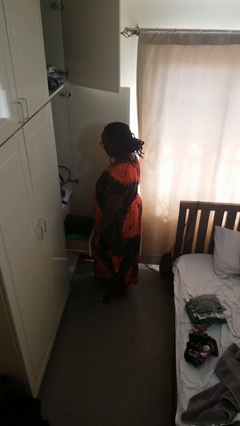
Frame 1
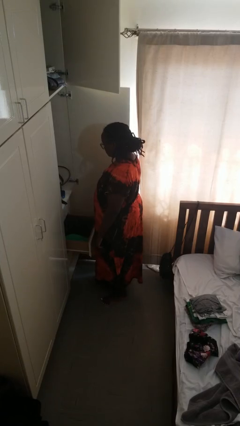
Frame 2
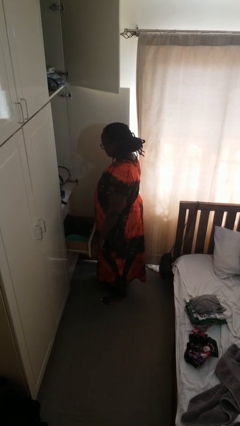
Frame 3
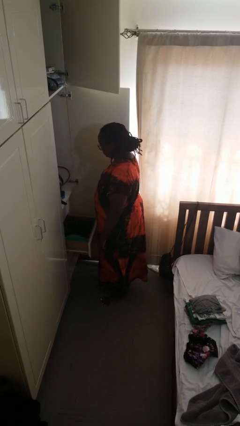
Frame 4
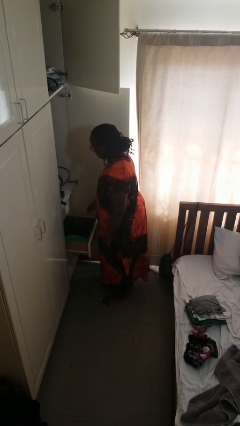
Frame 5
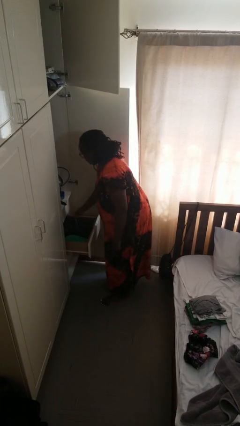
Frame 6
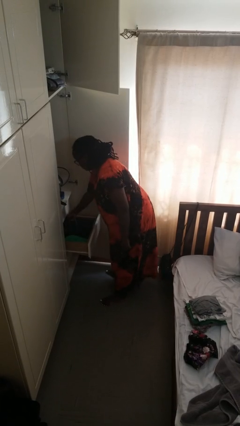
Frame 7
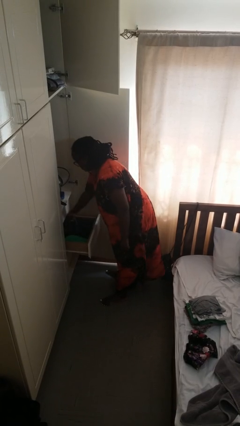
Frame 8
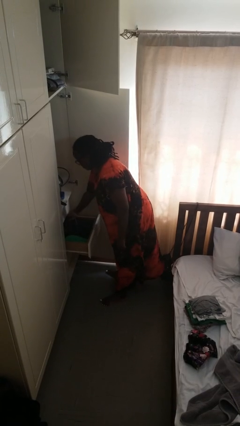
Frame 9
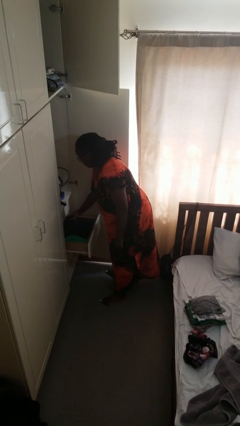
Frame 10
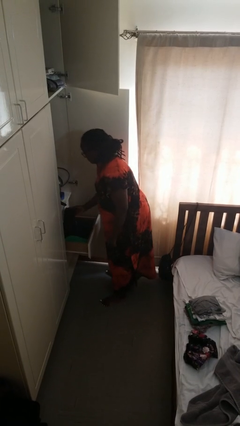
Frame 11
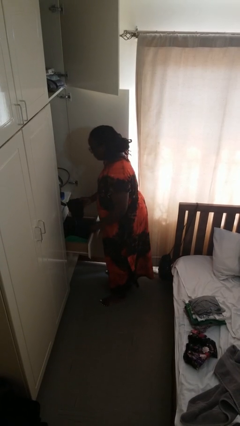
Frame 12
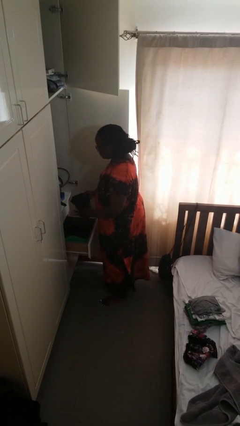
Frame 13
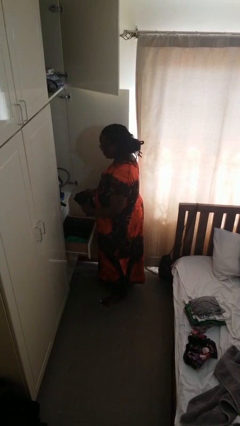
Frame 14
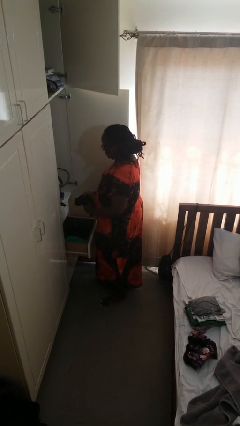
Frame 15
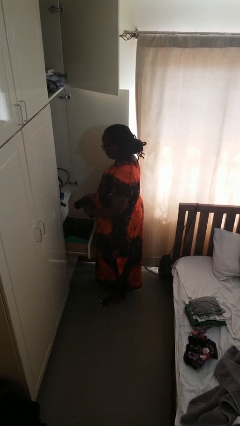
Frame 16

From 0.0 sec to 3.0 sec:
person takes clothes from dresser

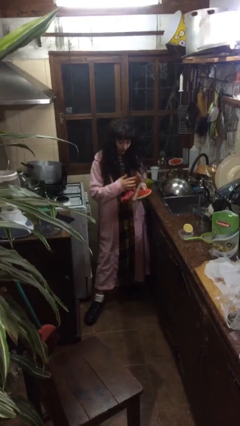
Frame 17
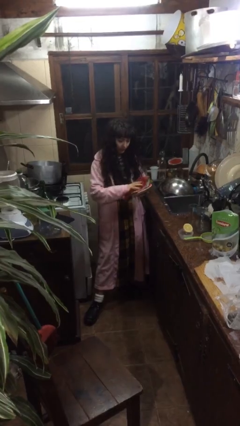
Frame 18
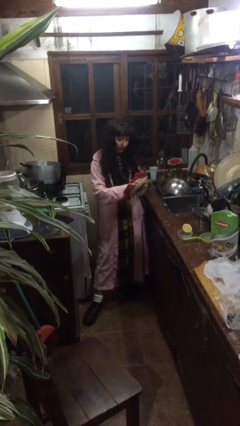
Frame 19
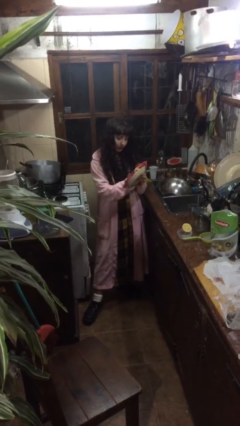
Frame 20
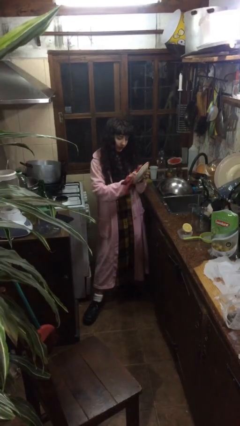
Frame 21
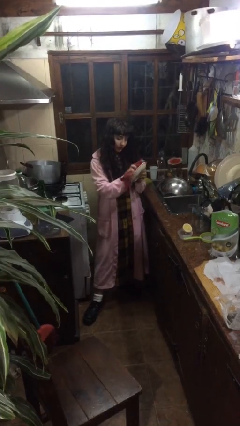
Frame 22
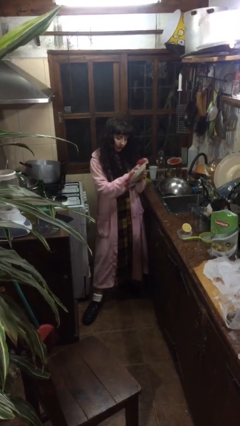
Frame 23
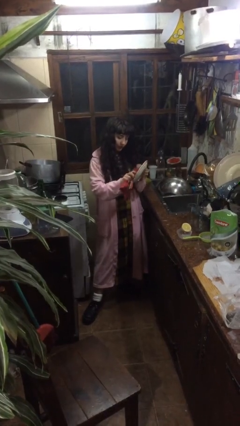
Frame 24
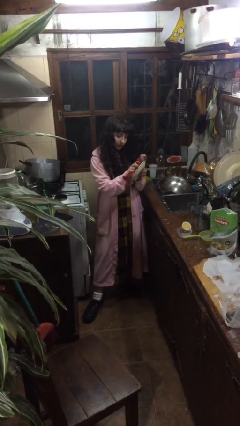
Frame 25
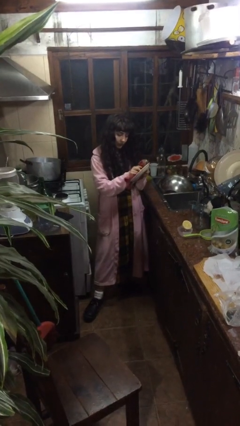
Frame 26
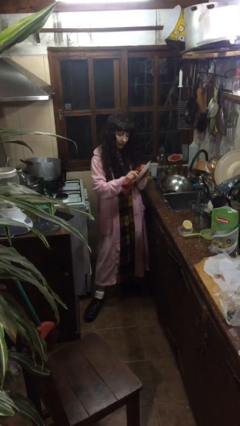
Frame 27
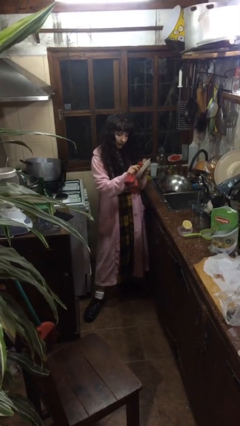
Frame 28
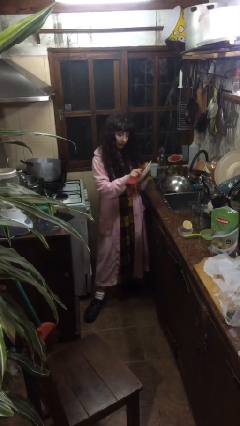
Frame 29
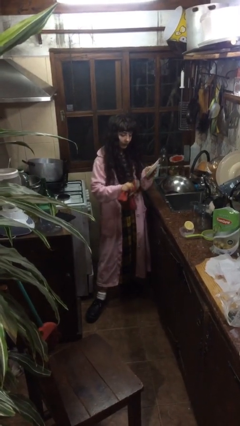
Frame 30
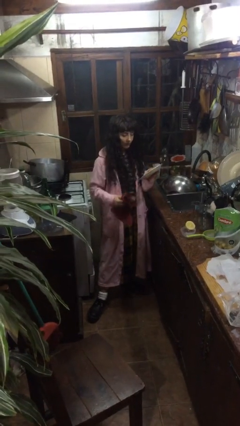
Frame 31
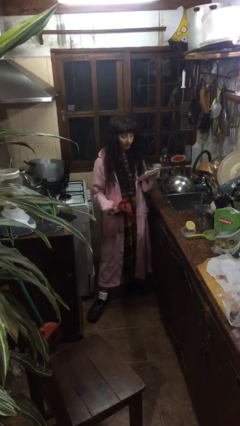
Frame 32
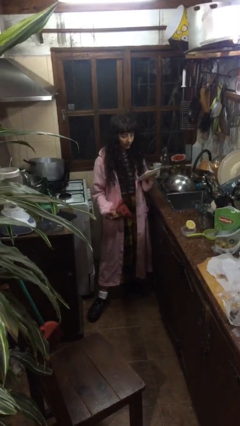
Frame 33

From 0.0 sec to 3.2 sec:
person dries dish

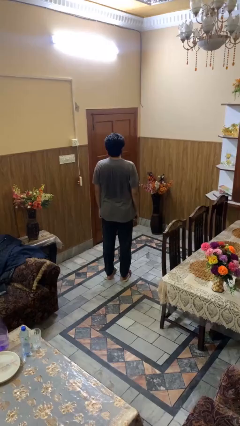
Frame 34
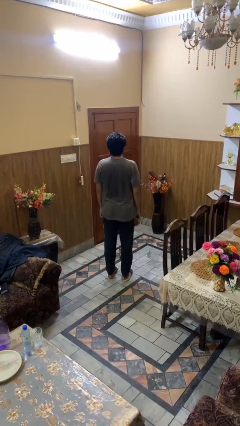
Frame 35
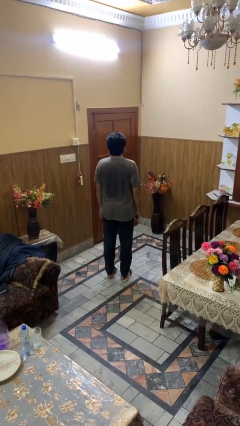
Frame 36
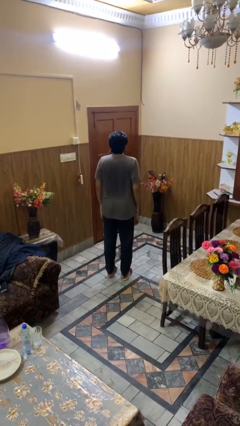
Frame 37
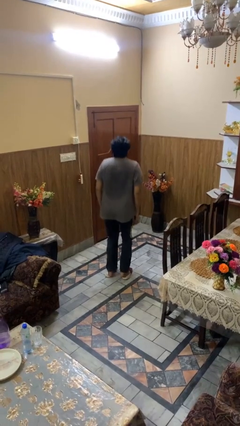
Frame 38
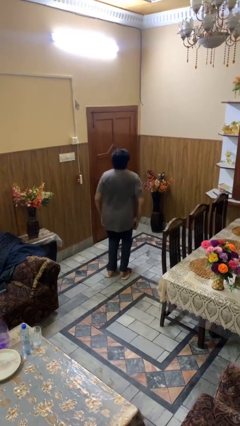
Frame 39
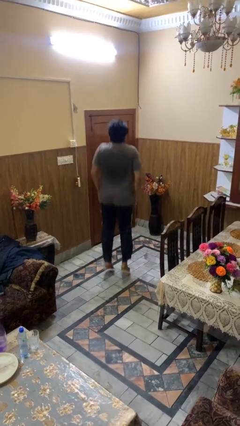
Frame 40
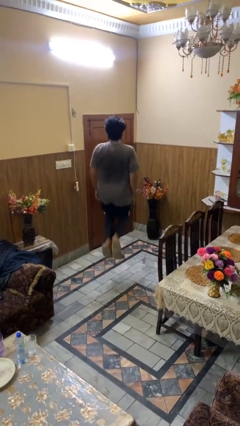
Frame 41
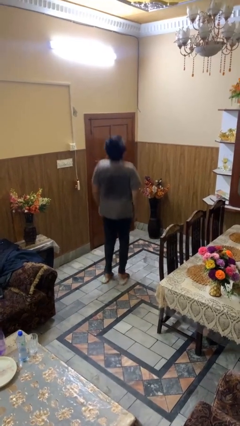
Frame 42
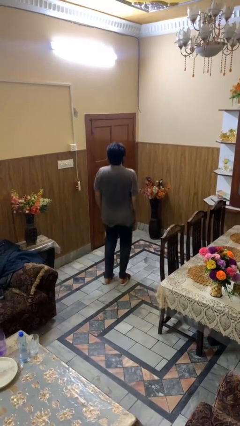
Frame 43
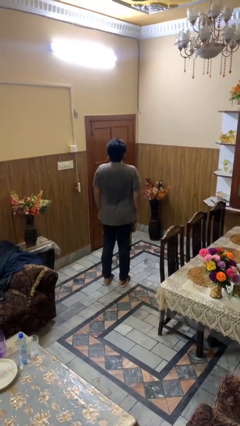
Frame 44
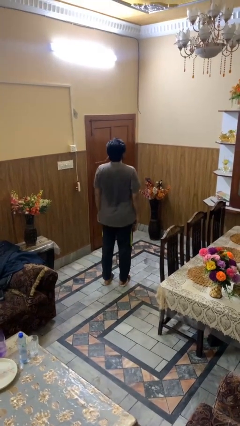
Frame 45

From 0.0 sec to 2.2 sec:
person jumps

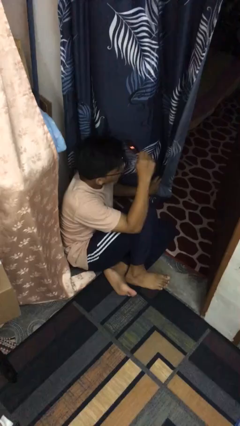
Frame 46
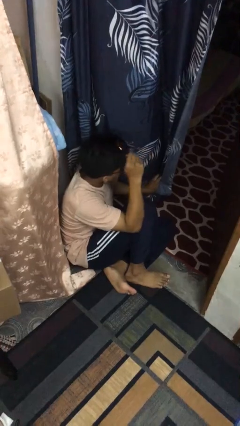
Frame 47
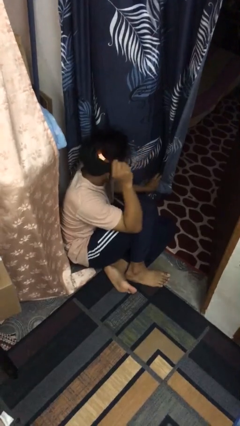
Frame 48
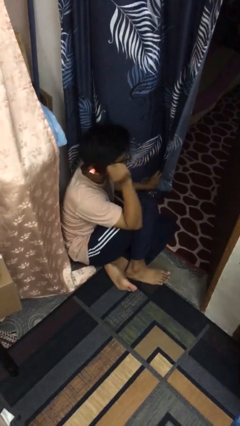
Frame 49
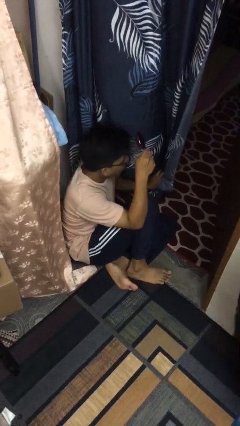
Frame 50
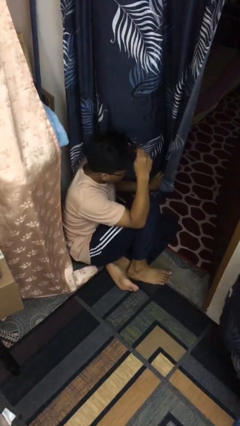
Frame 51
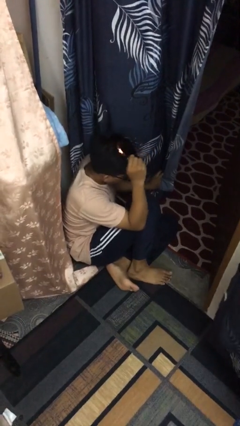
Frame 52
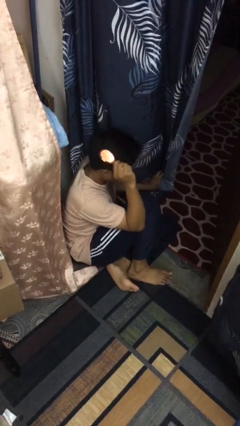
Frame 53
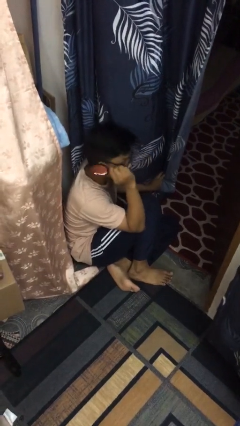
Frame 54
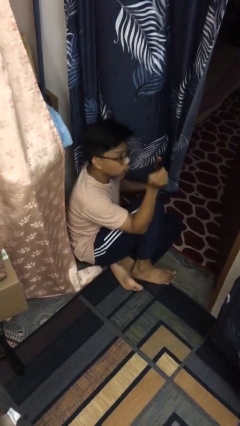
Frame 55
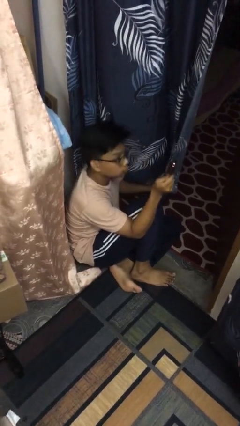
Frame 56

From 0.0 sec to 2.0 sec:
person brushes hair

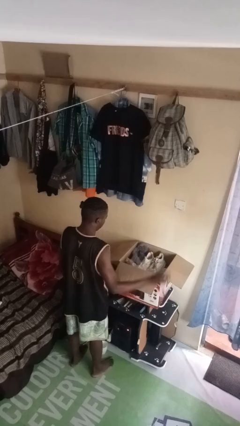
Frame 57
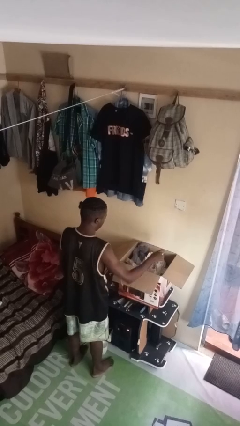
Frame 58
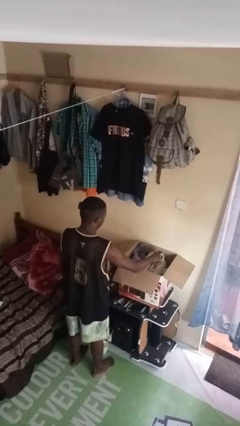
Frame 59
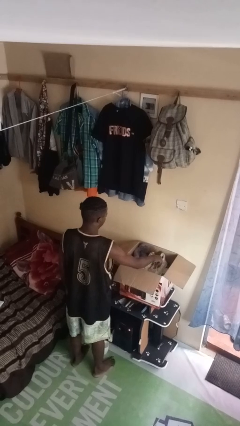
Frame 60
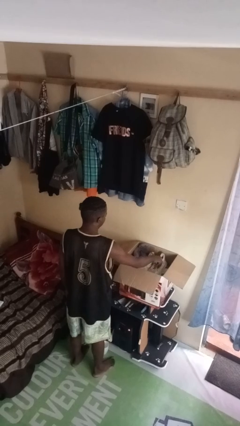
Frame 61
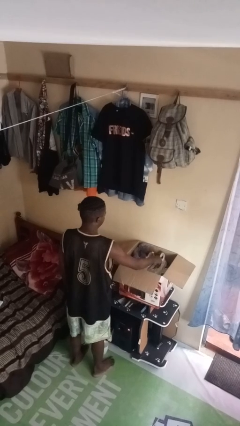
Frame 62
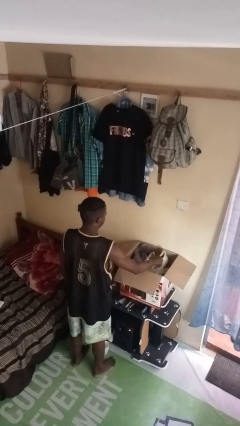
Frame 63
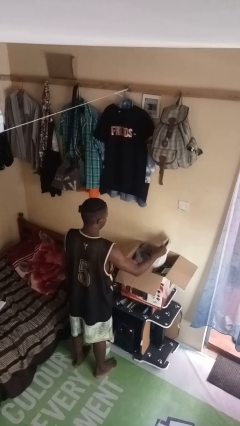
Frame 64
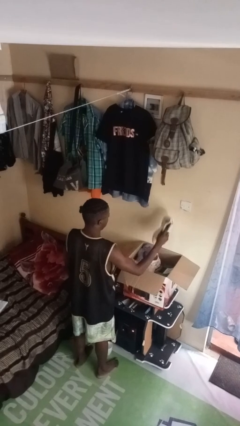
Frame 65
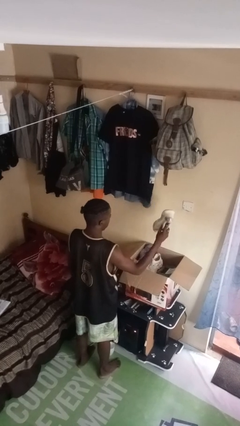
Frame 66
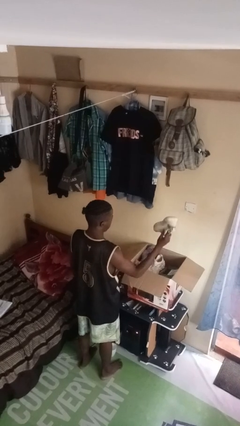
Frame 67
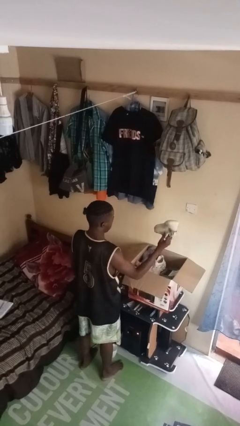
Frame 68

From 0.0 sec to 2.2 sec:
person takes object from box

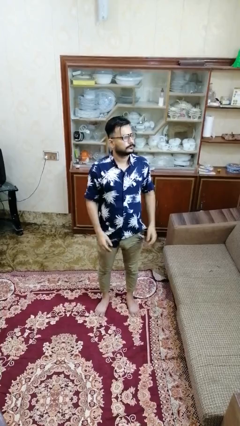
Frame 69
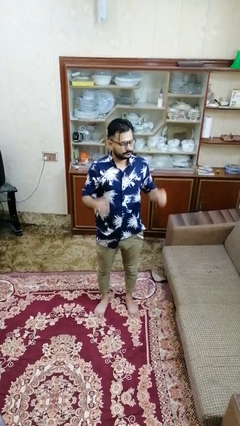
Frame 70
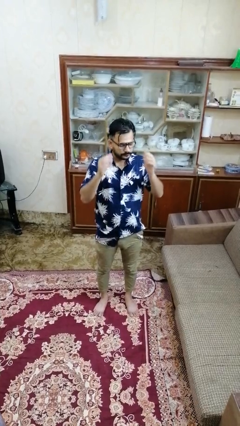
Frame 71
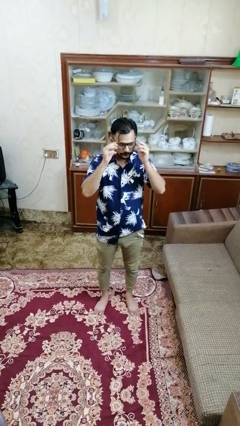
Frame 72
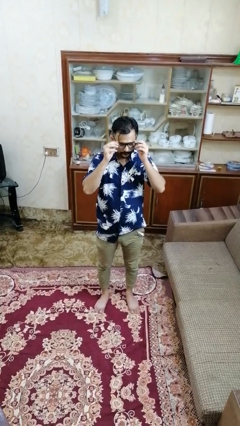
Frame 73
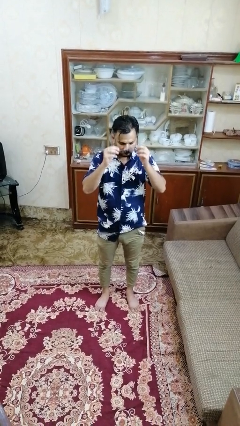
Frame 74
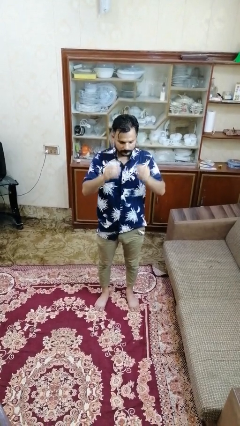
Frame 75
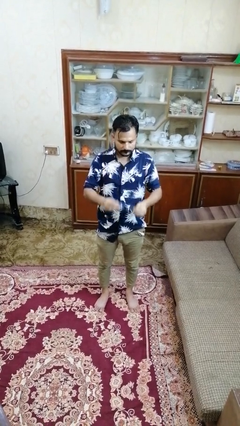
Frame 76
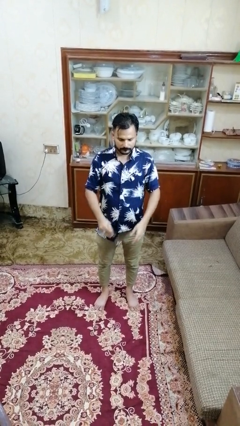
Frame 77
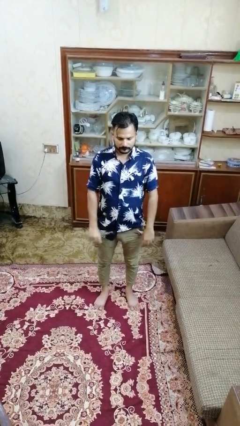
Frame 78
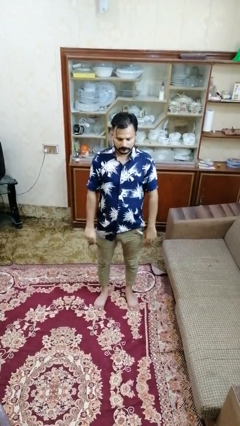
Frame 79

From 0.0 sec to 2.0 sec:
person takes off glasses

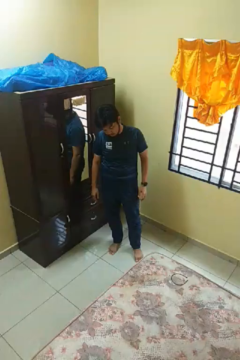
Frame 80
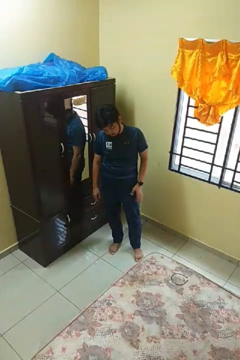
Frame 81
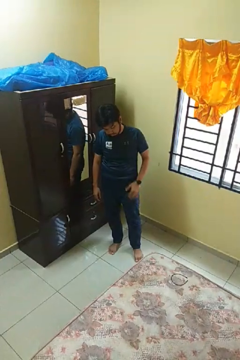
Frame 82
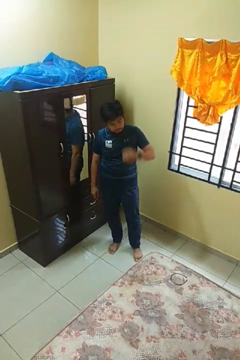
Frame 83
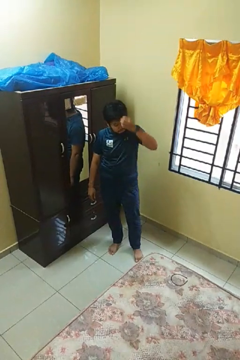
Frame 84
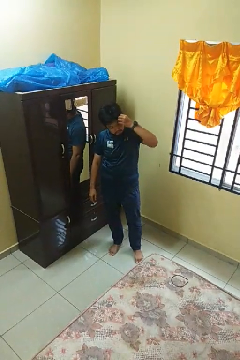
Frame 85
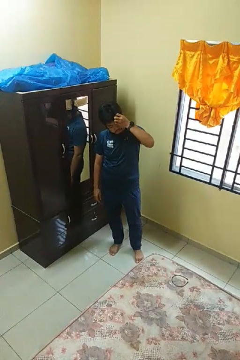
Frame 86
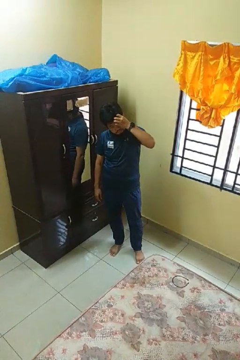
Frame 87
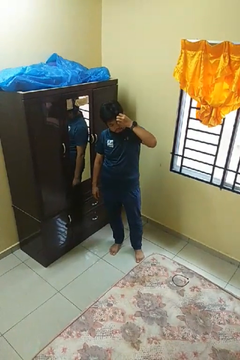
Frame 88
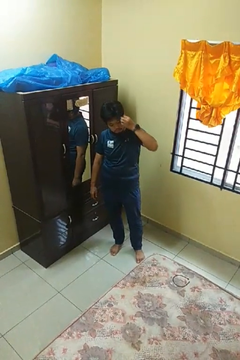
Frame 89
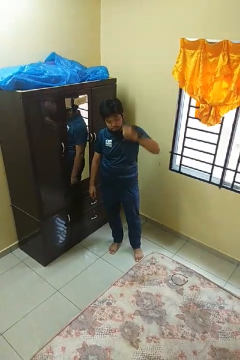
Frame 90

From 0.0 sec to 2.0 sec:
person scratches face

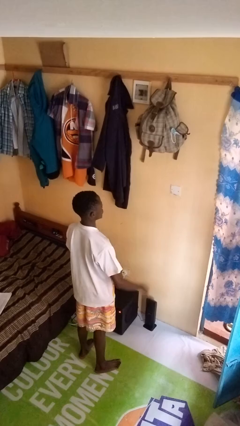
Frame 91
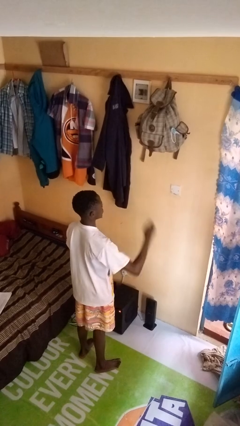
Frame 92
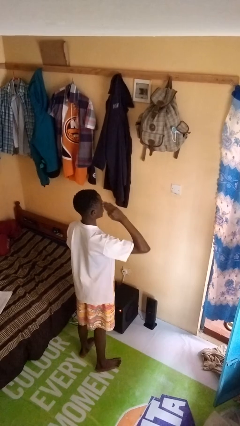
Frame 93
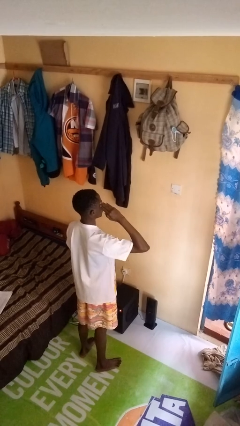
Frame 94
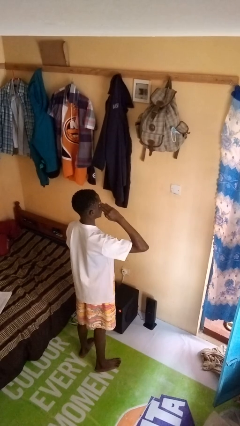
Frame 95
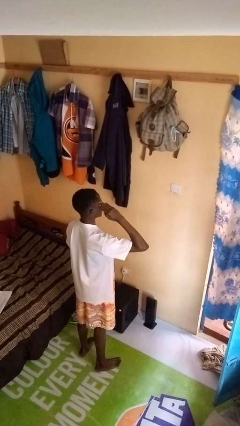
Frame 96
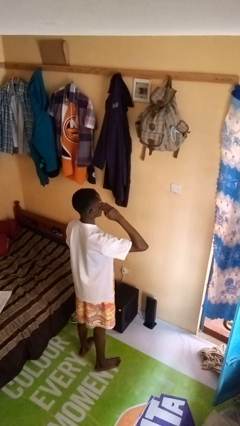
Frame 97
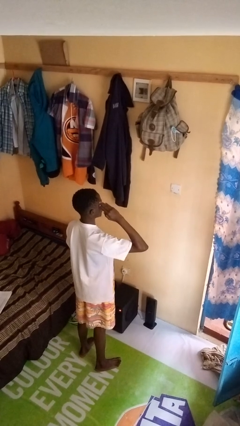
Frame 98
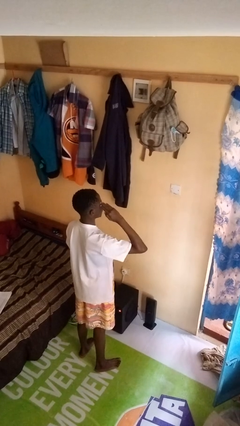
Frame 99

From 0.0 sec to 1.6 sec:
person salutes
